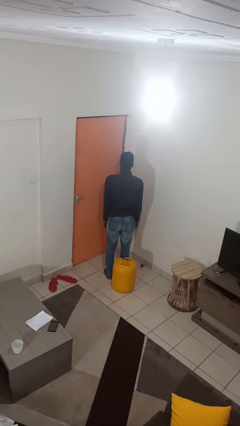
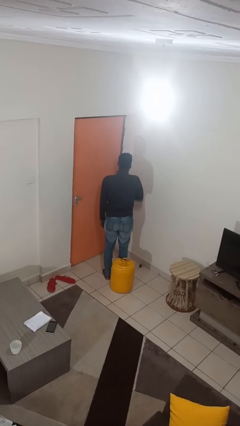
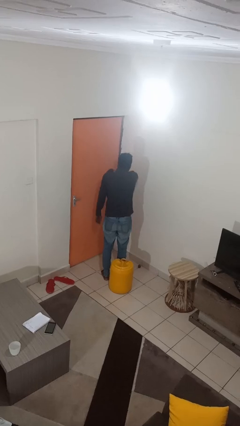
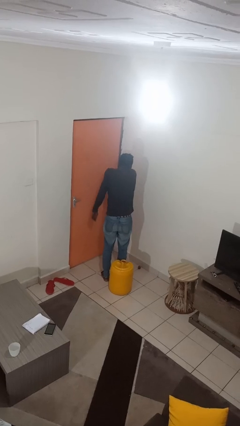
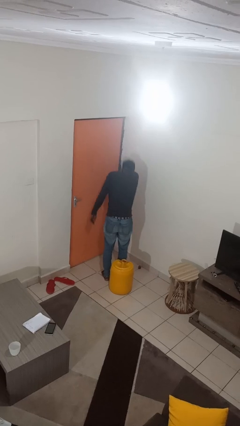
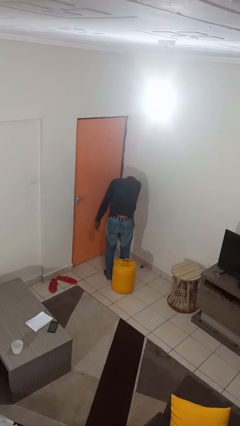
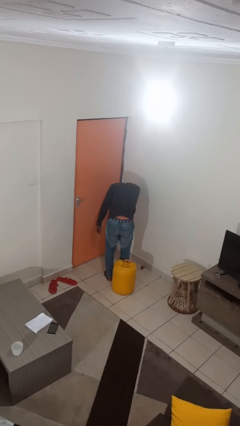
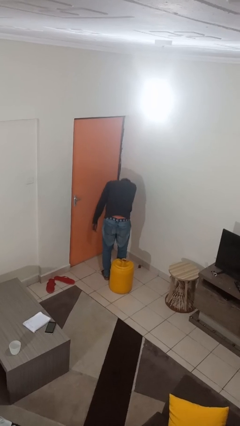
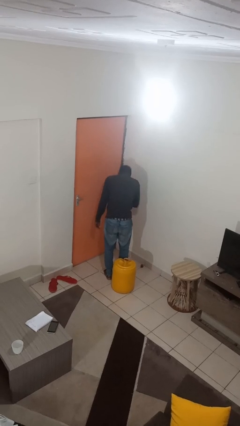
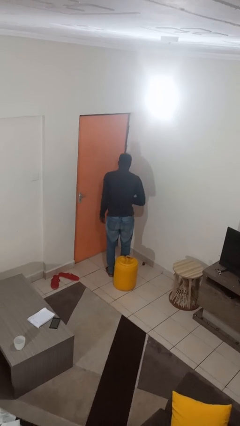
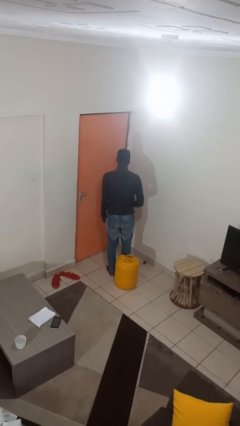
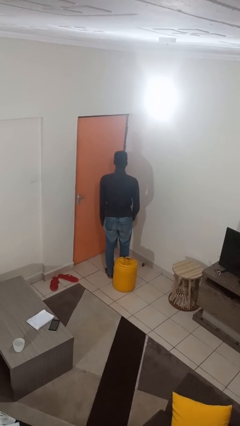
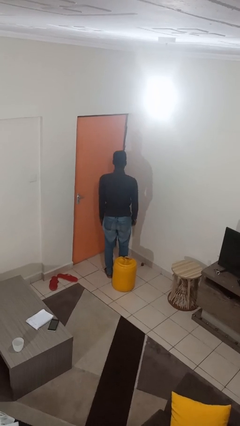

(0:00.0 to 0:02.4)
person sneezes into arm

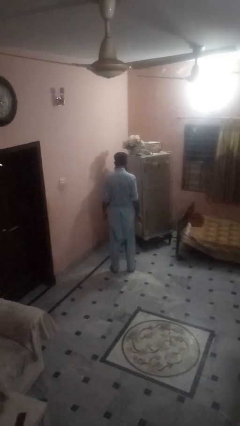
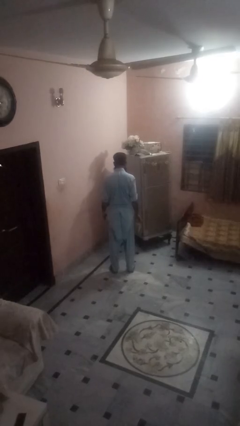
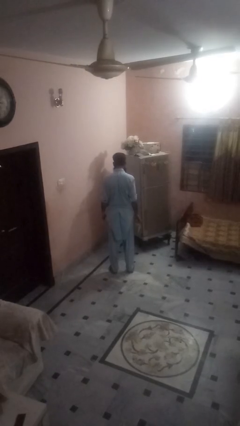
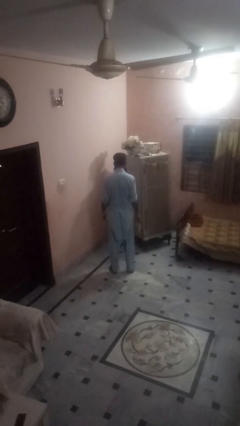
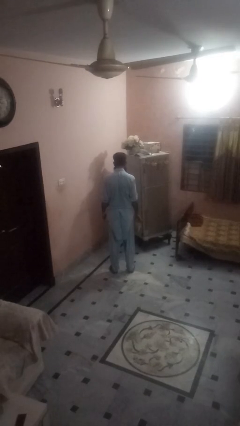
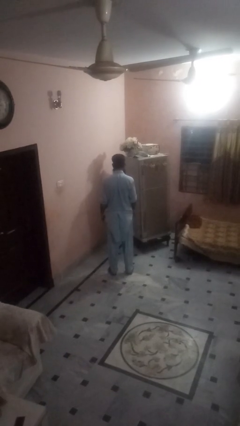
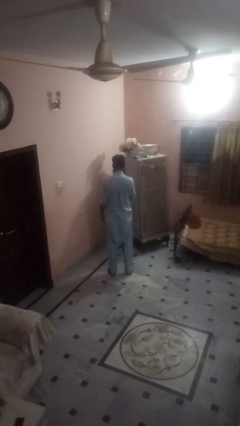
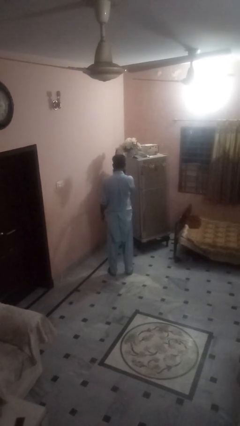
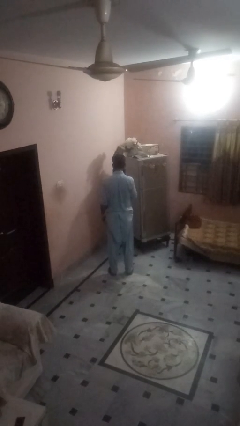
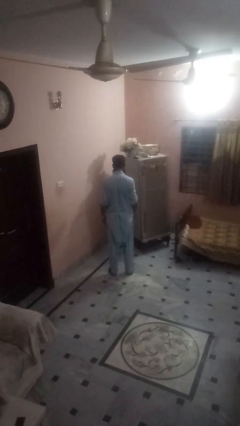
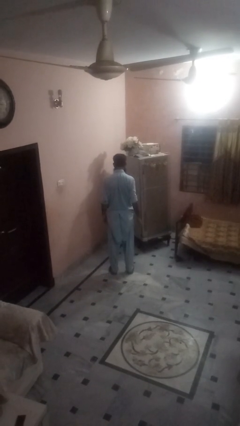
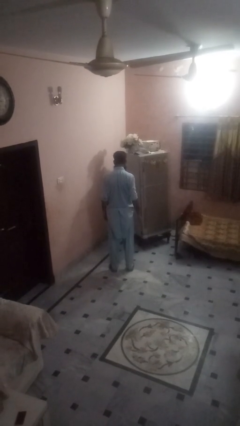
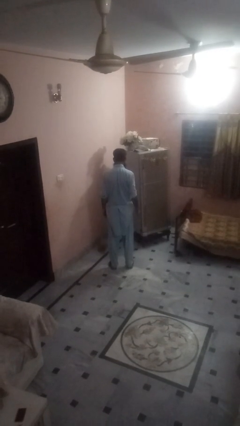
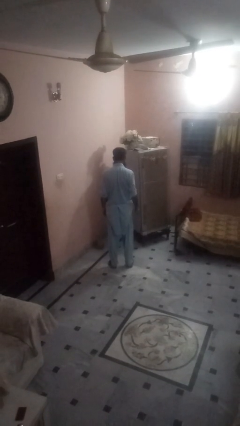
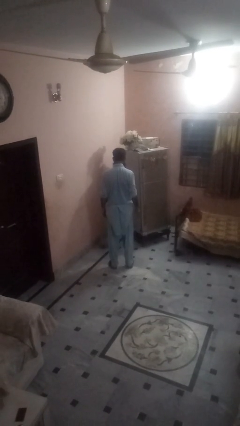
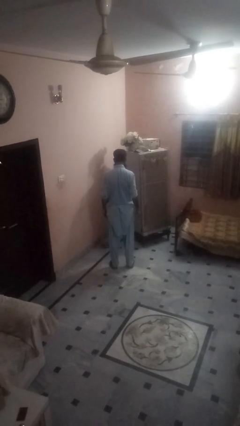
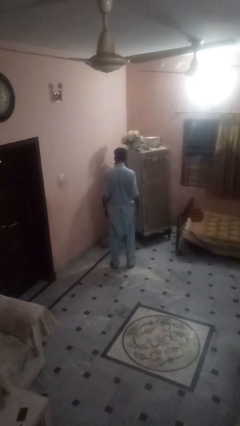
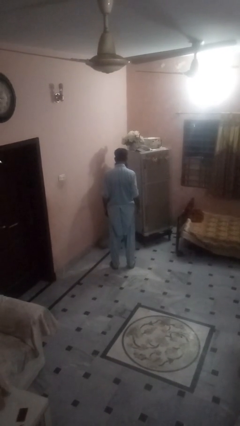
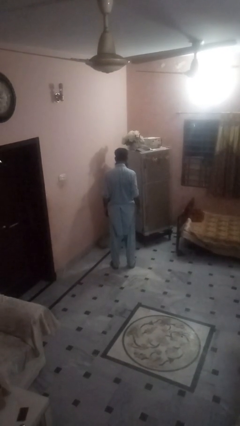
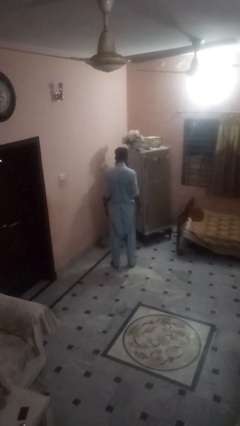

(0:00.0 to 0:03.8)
person throws object into air

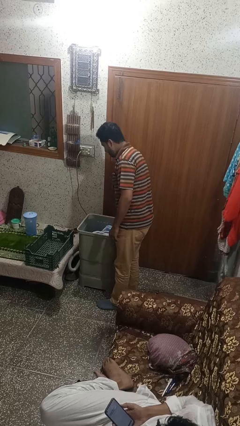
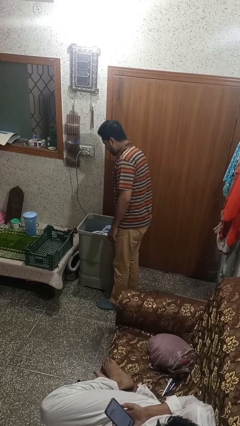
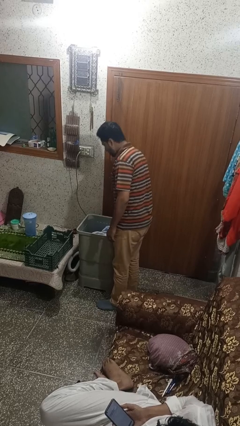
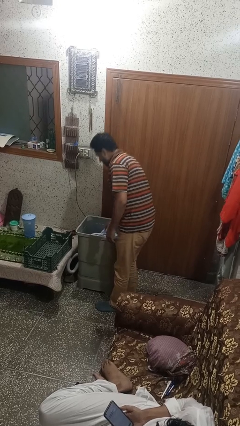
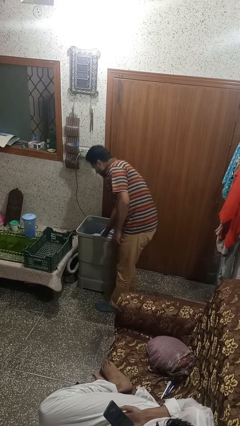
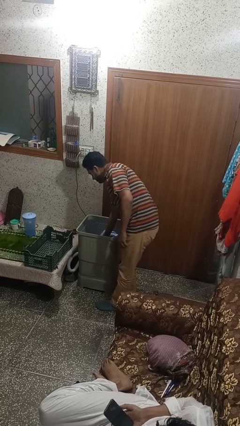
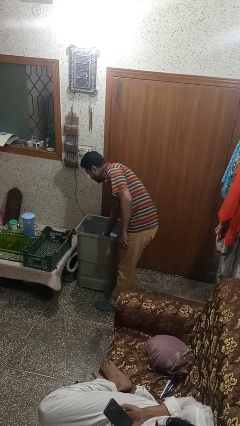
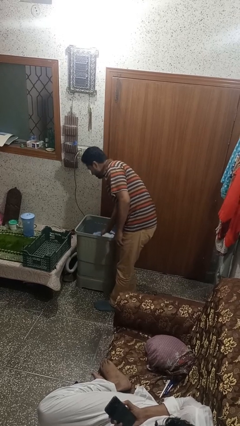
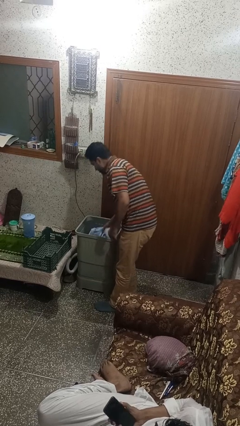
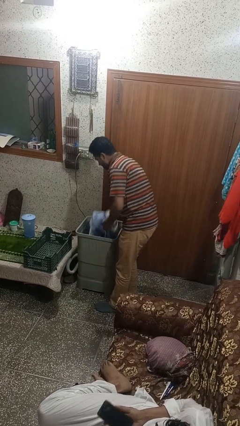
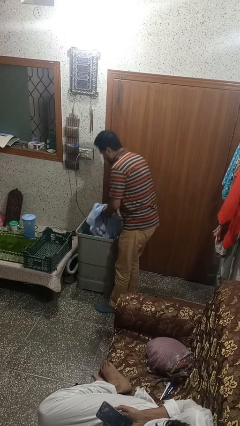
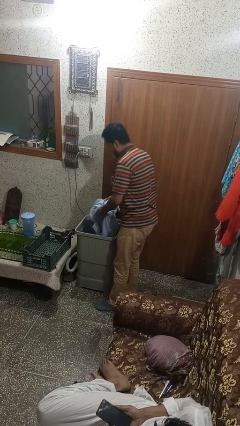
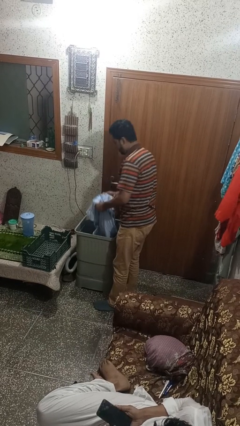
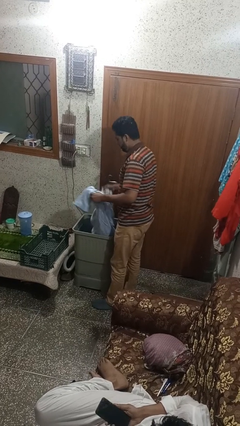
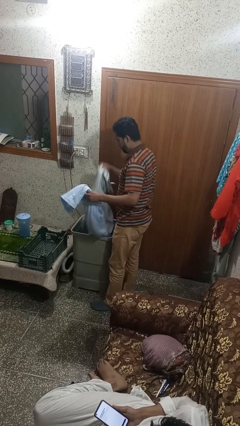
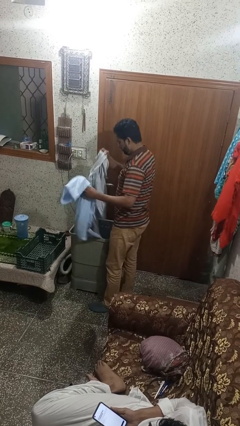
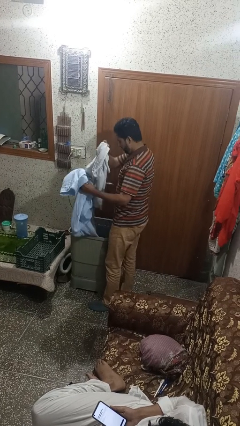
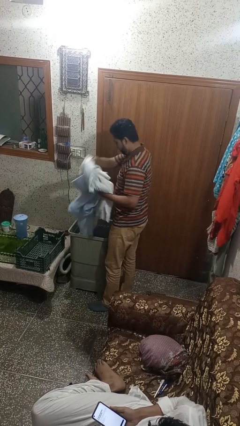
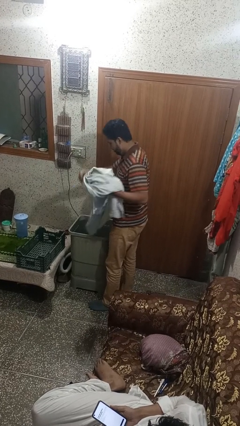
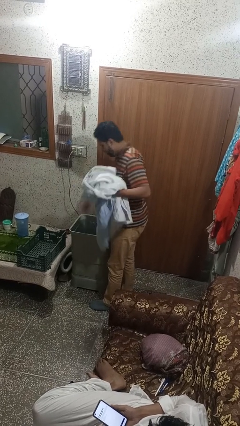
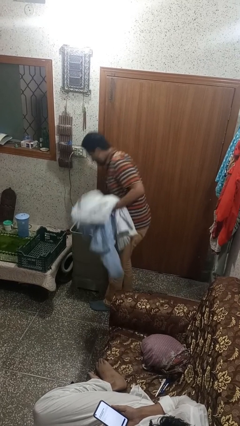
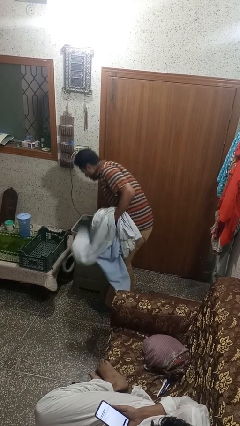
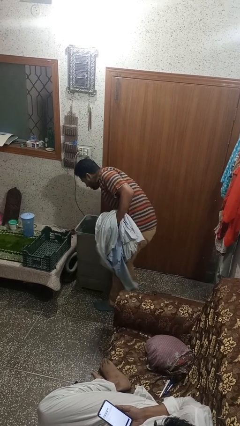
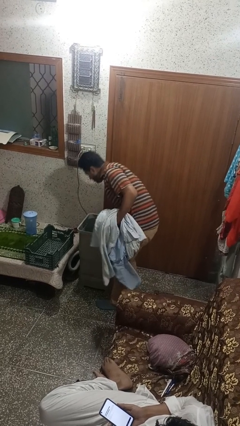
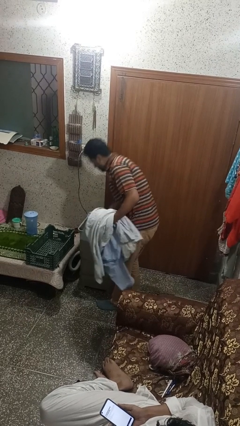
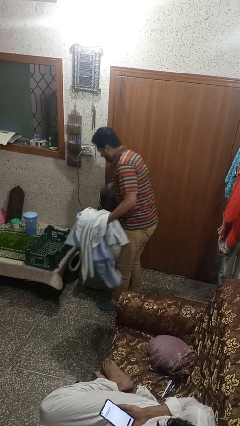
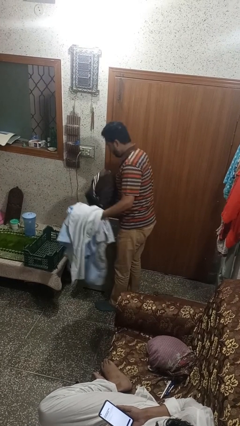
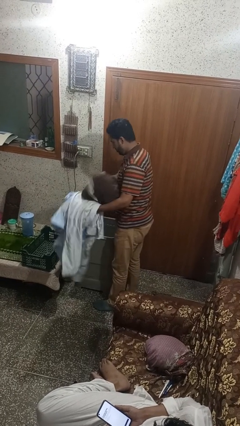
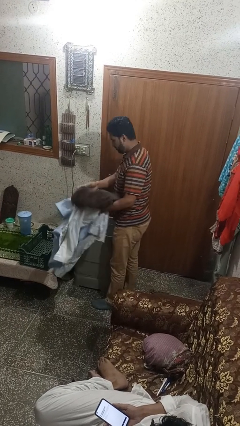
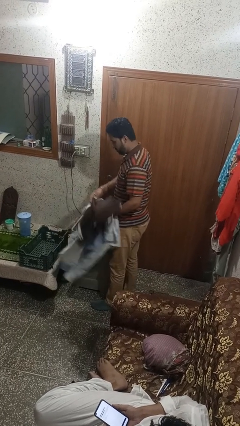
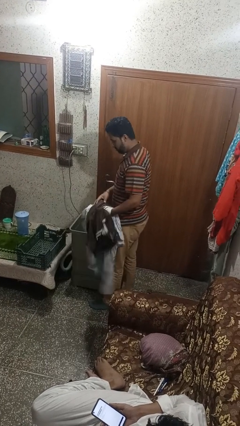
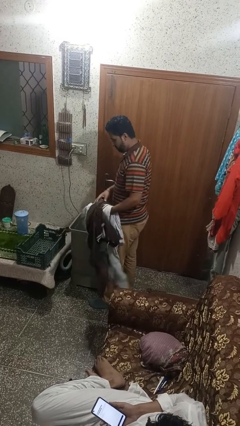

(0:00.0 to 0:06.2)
person unloads dryer

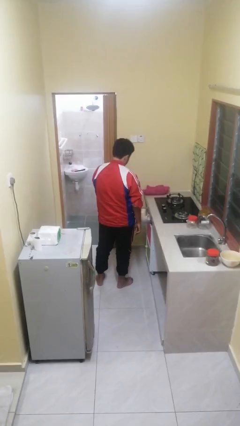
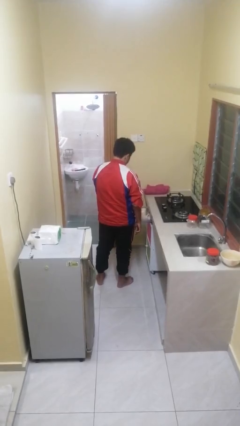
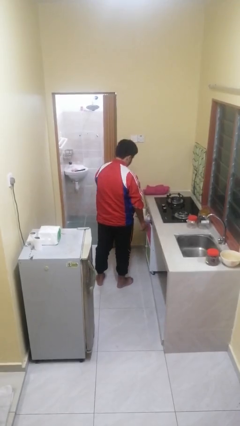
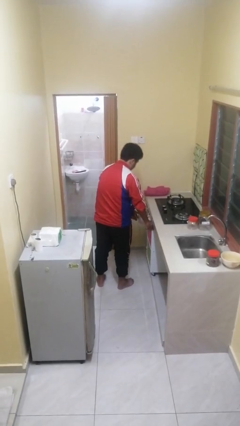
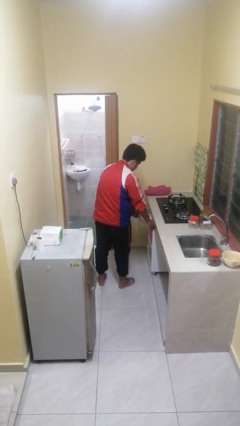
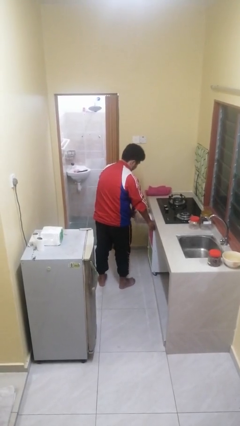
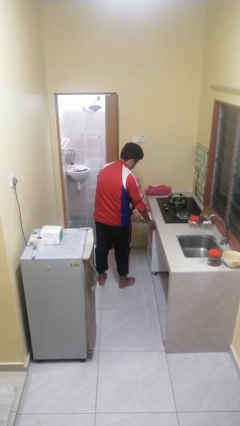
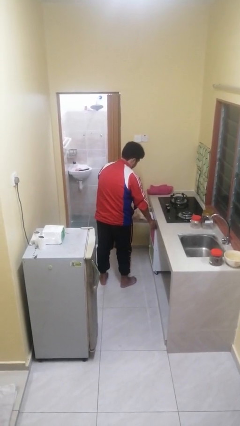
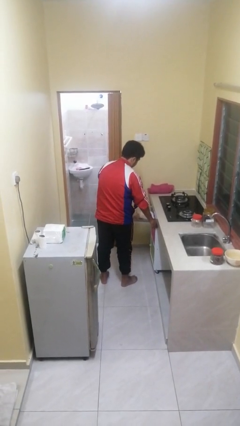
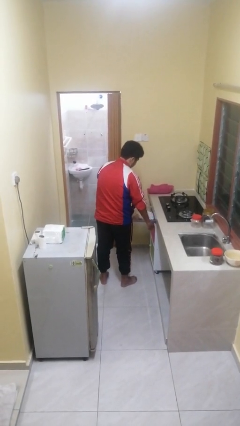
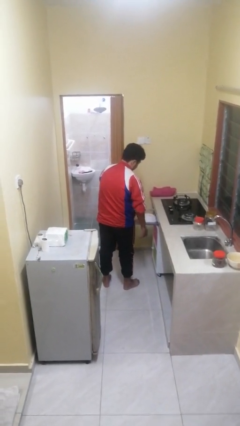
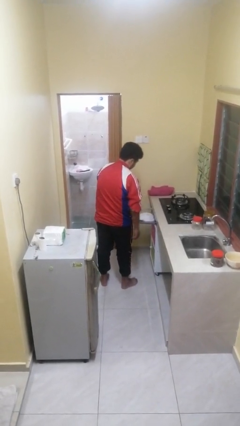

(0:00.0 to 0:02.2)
person opens kitchen drawer

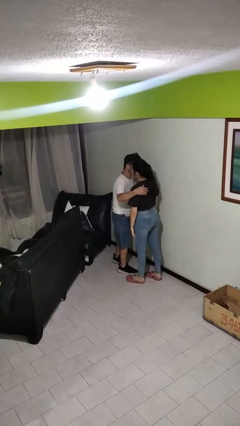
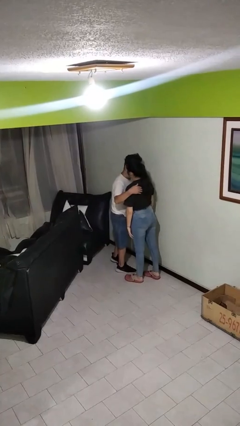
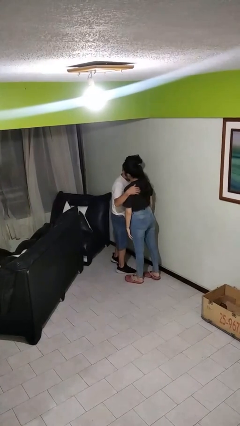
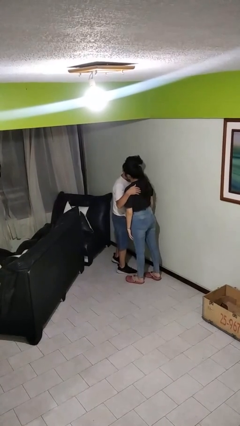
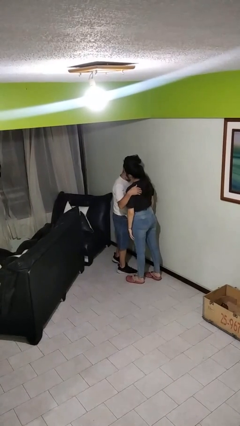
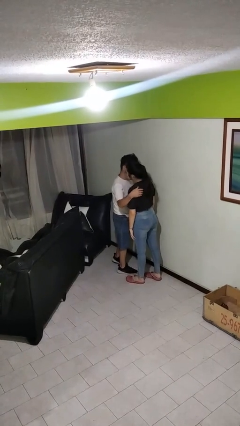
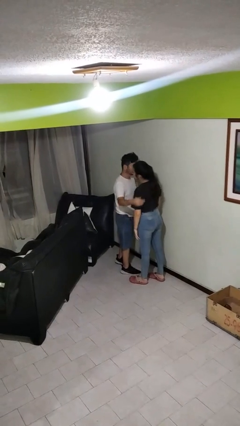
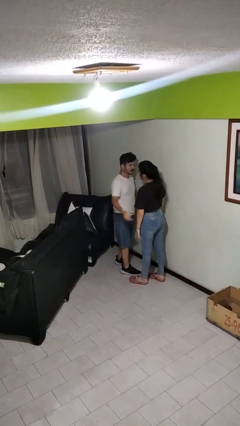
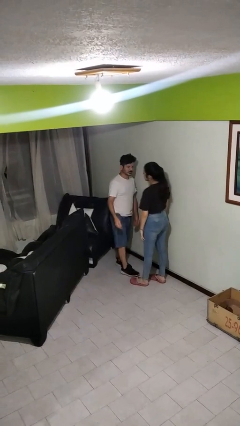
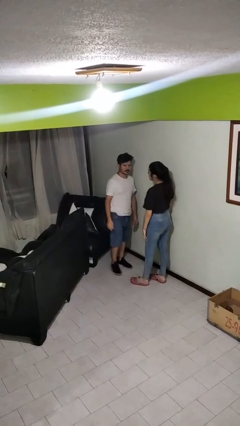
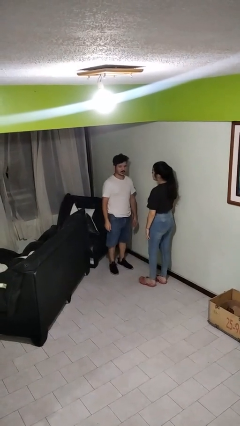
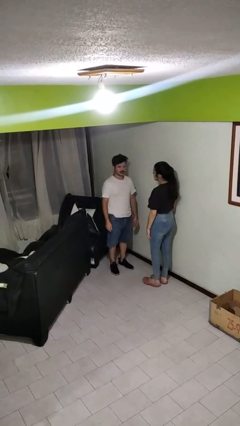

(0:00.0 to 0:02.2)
person kisses cheek of person

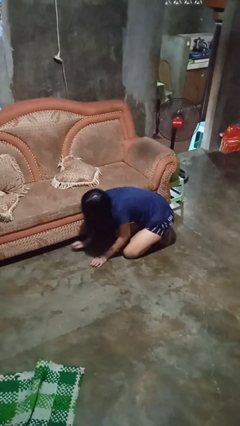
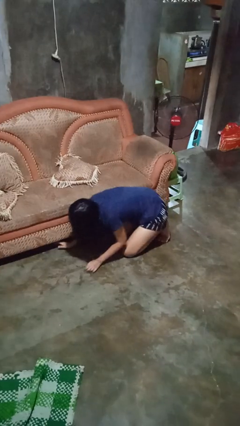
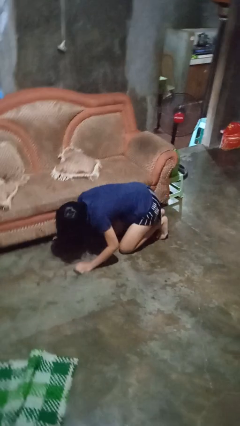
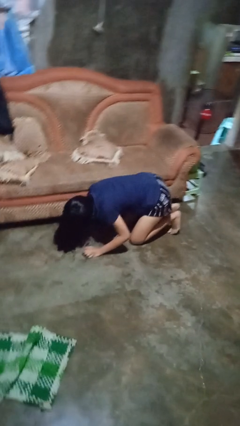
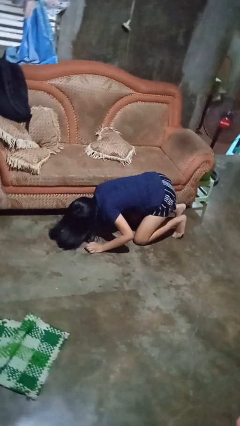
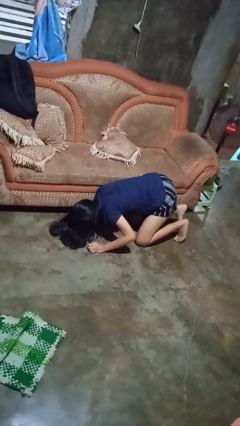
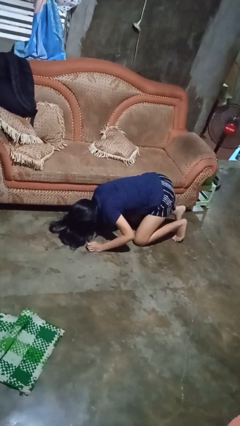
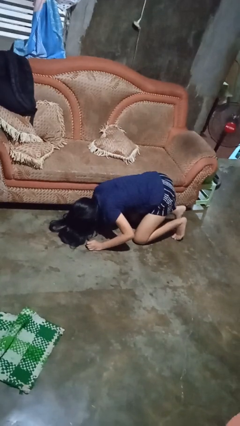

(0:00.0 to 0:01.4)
person searches under couch
